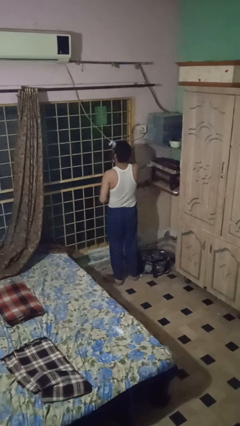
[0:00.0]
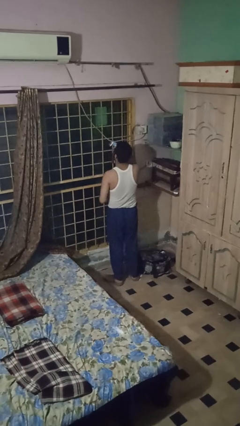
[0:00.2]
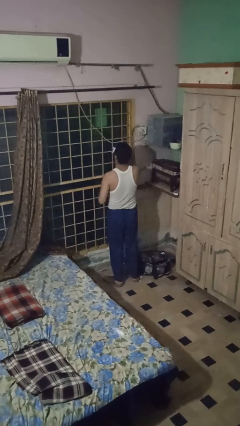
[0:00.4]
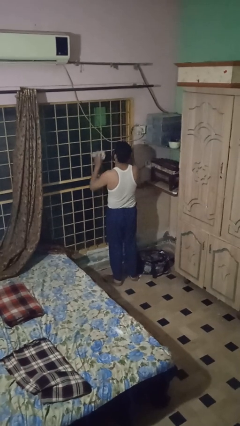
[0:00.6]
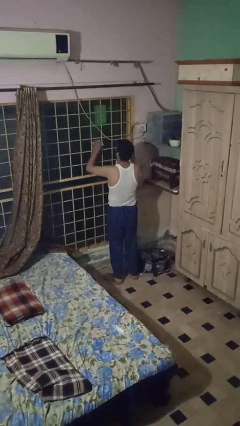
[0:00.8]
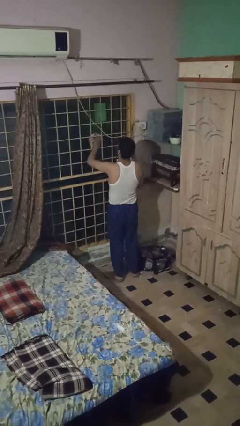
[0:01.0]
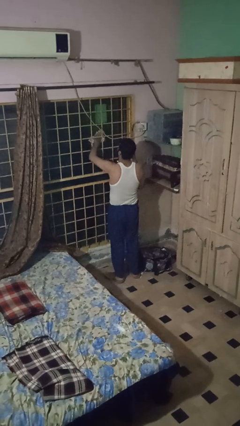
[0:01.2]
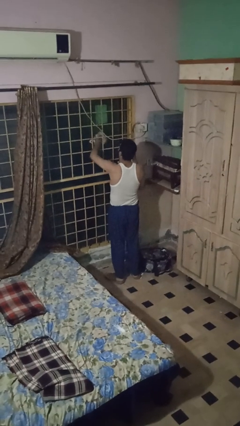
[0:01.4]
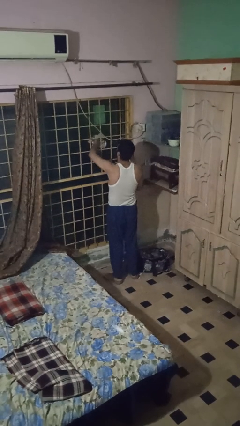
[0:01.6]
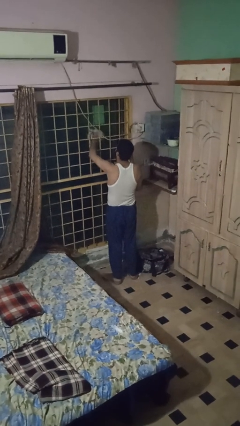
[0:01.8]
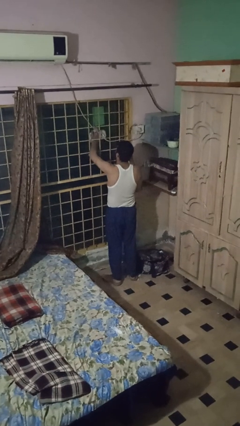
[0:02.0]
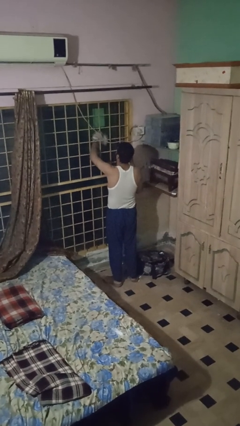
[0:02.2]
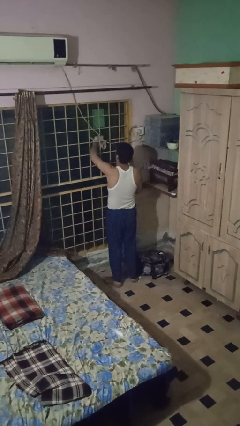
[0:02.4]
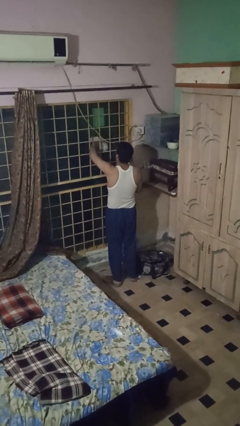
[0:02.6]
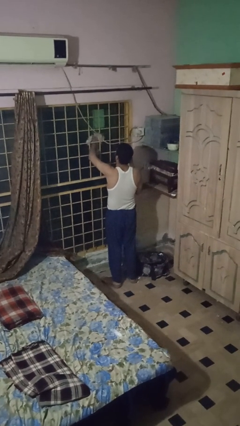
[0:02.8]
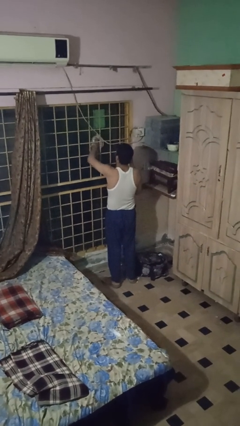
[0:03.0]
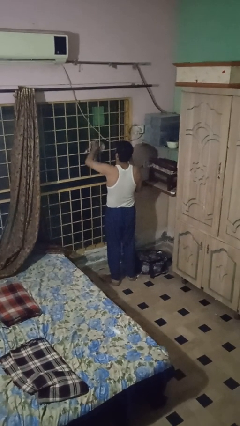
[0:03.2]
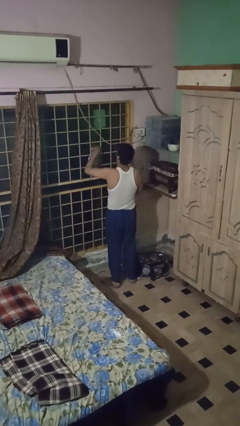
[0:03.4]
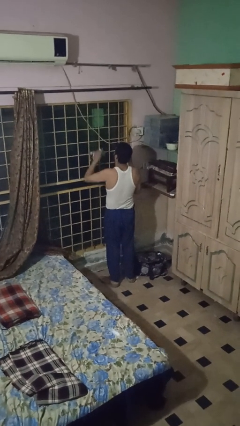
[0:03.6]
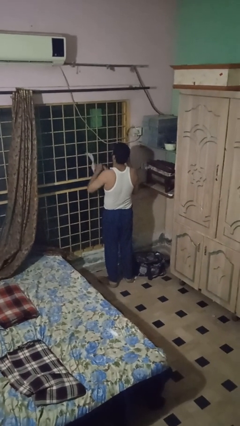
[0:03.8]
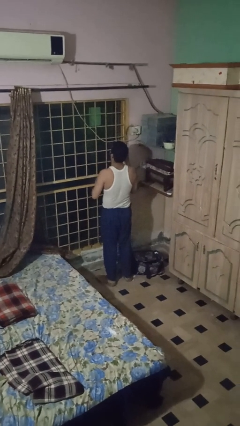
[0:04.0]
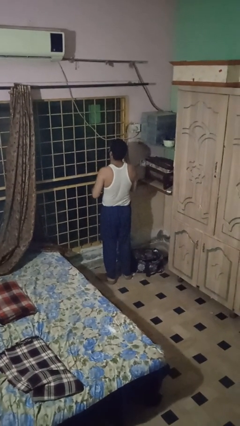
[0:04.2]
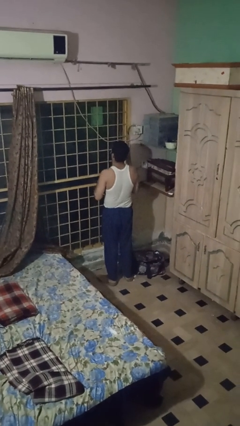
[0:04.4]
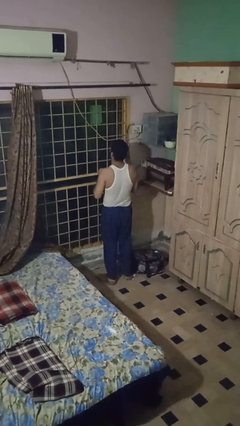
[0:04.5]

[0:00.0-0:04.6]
person washes window

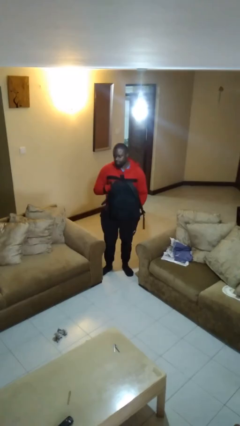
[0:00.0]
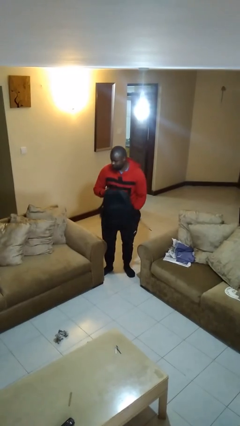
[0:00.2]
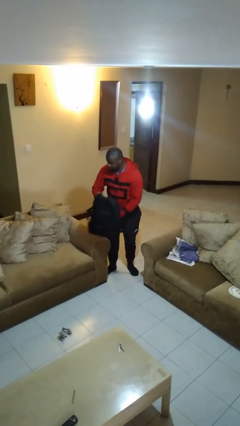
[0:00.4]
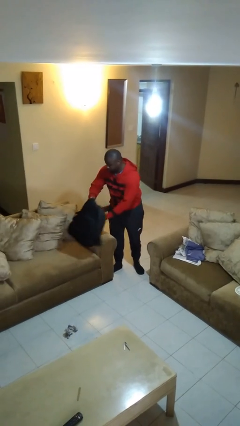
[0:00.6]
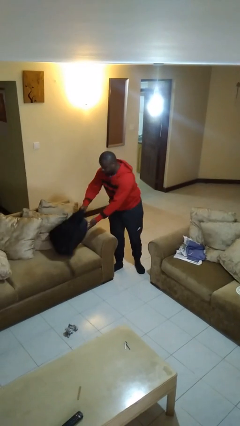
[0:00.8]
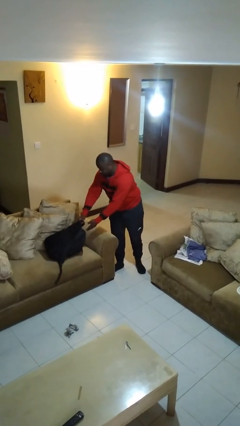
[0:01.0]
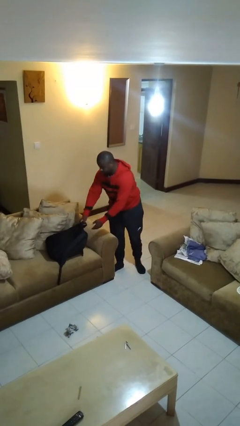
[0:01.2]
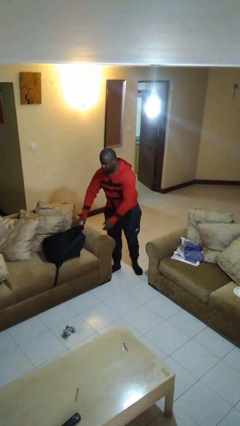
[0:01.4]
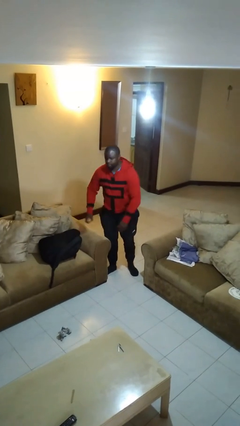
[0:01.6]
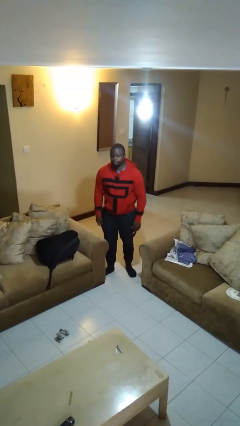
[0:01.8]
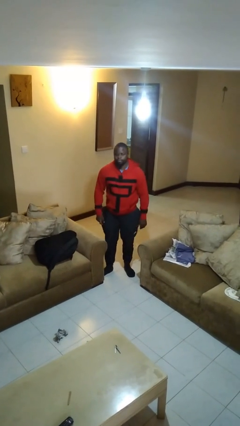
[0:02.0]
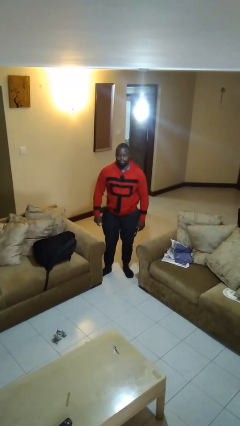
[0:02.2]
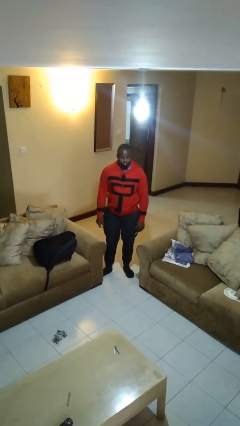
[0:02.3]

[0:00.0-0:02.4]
person puts down object on couch

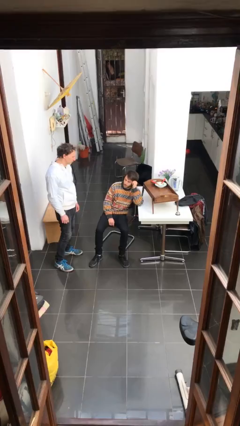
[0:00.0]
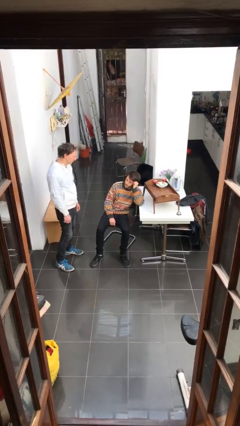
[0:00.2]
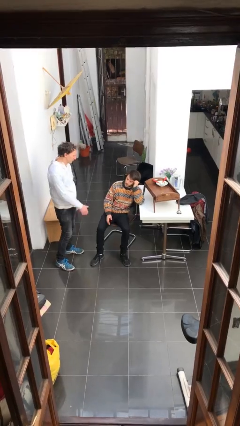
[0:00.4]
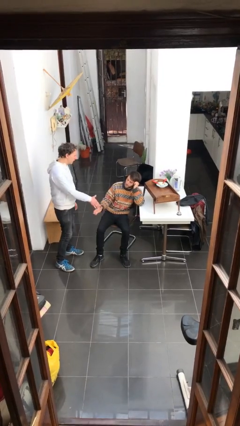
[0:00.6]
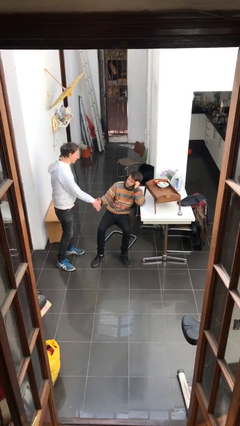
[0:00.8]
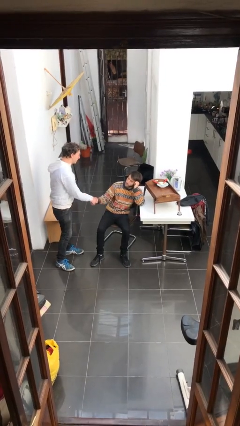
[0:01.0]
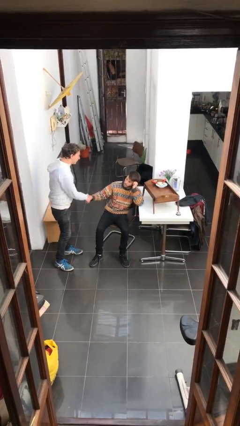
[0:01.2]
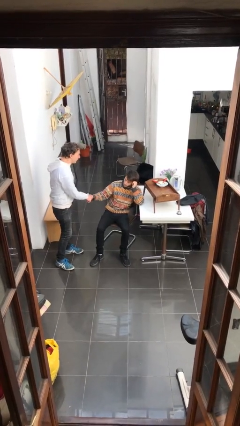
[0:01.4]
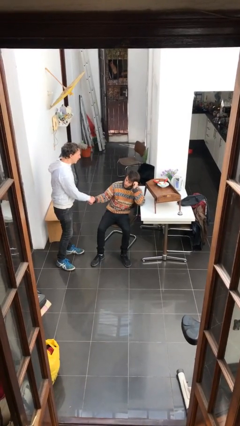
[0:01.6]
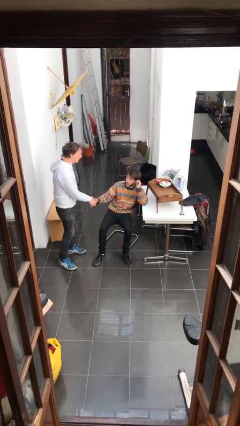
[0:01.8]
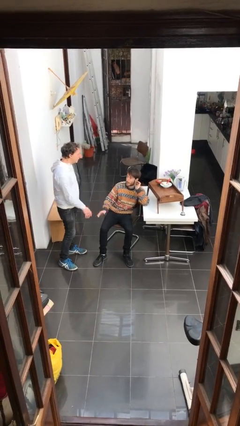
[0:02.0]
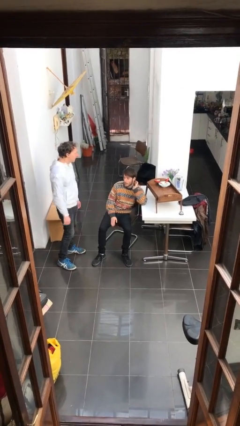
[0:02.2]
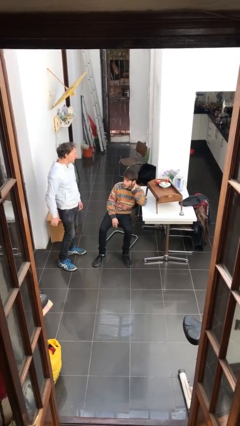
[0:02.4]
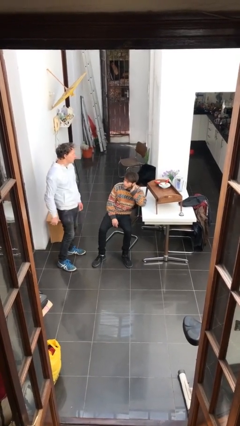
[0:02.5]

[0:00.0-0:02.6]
person shakes hand

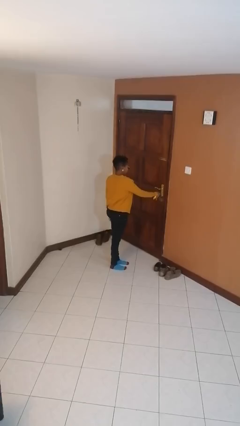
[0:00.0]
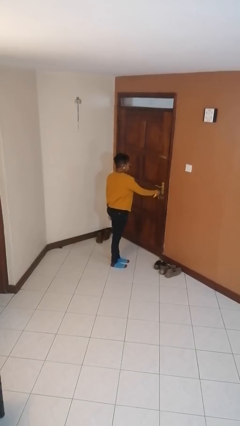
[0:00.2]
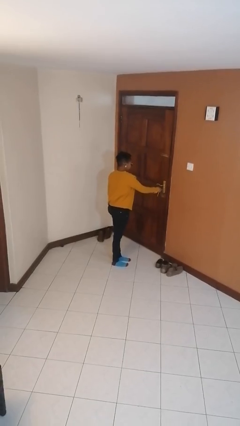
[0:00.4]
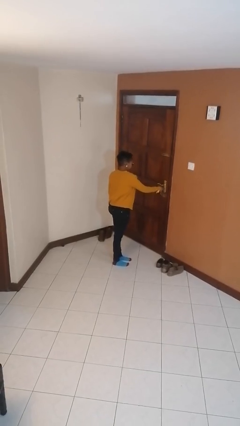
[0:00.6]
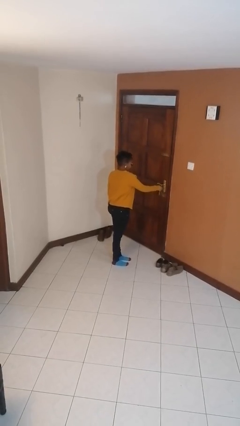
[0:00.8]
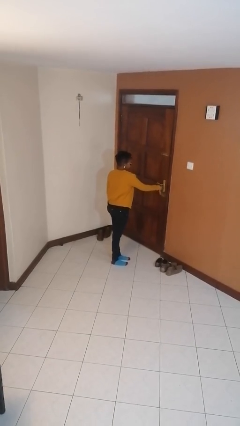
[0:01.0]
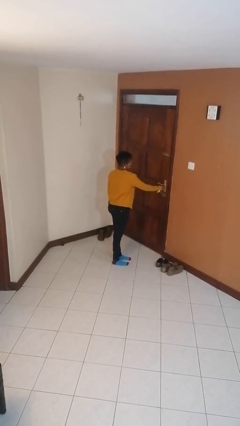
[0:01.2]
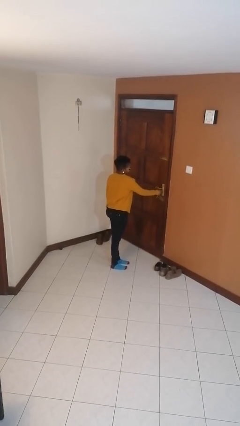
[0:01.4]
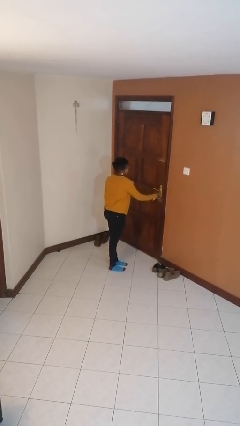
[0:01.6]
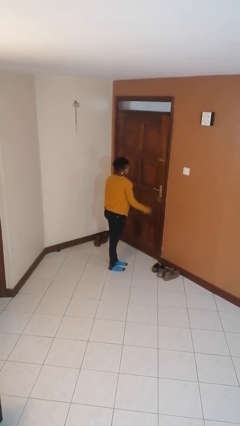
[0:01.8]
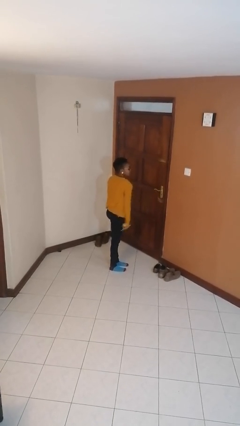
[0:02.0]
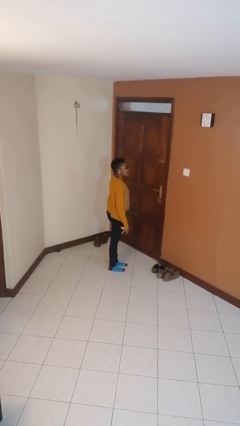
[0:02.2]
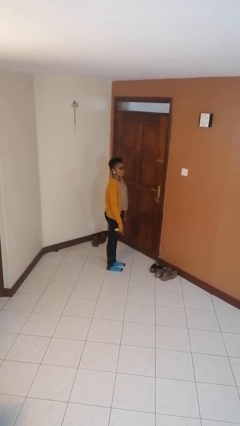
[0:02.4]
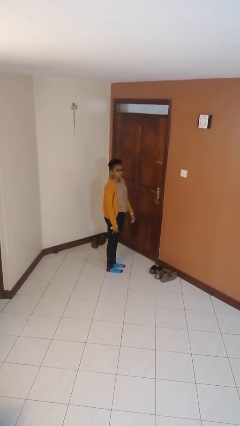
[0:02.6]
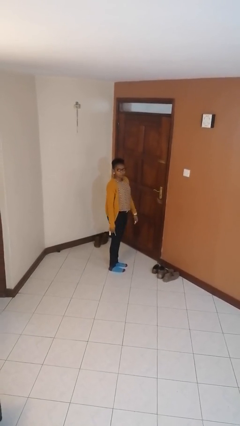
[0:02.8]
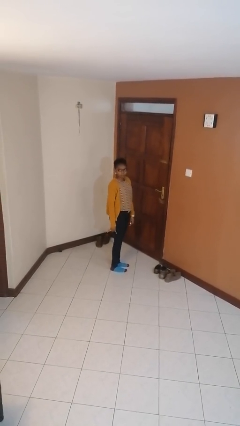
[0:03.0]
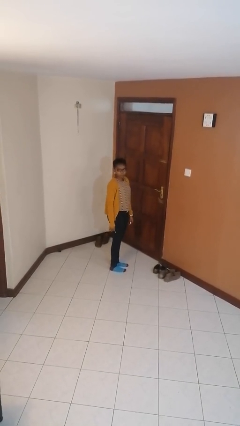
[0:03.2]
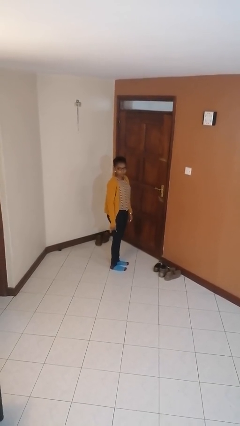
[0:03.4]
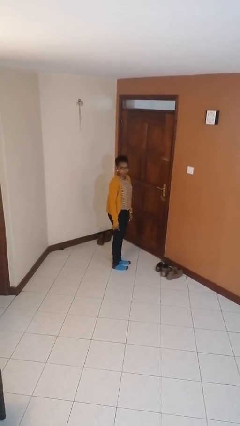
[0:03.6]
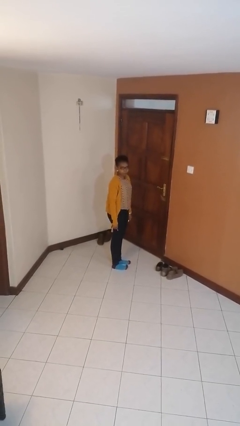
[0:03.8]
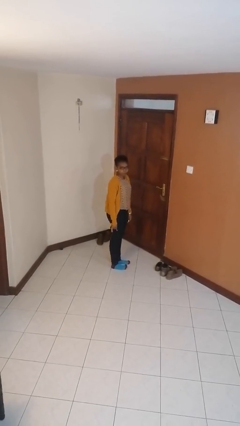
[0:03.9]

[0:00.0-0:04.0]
person locks door with keys

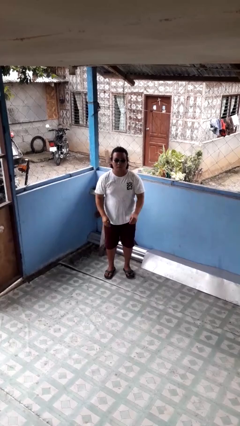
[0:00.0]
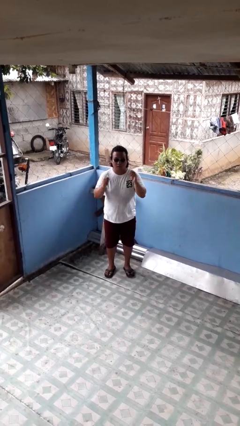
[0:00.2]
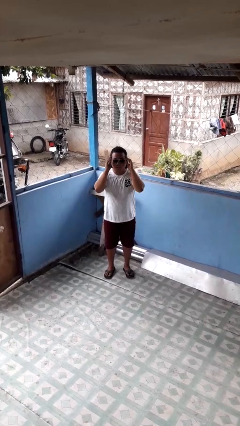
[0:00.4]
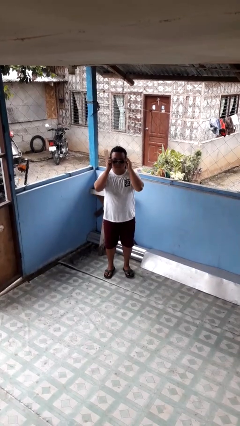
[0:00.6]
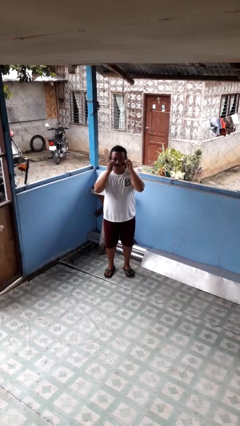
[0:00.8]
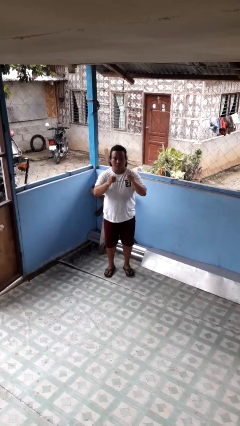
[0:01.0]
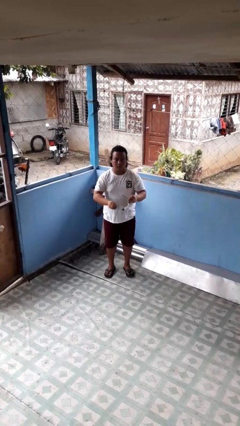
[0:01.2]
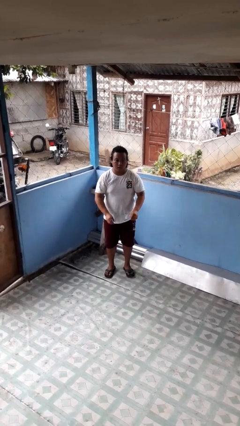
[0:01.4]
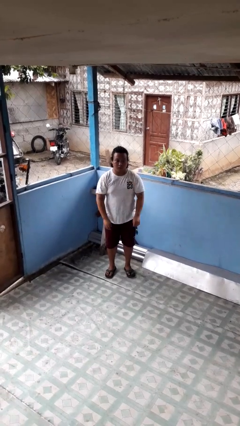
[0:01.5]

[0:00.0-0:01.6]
person takes off sunglasses

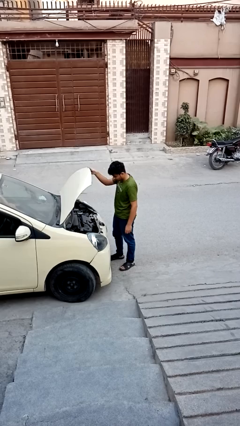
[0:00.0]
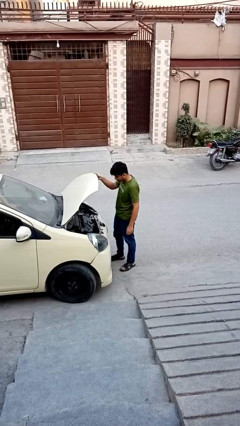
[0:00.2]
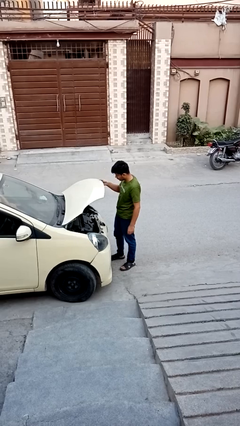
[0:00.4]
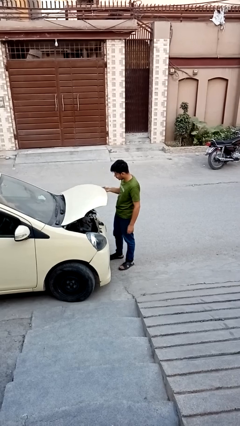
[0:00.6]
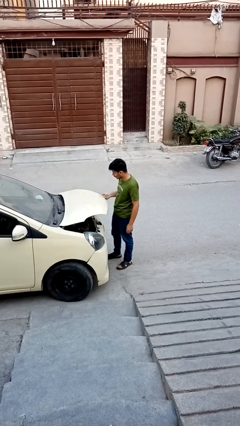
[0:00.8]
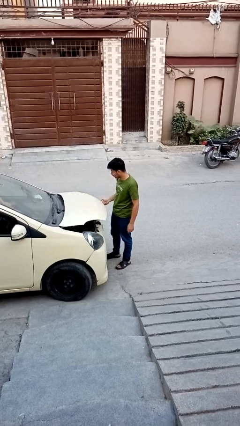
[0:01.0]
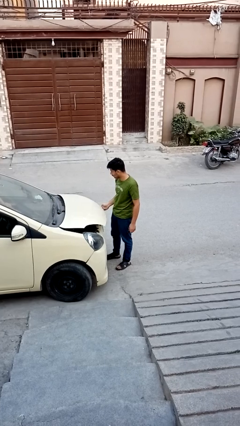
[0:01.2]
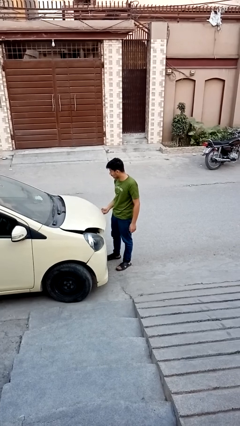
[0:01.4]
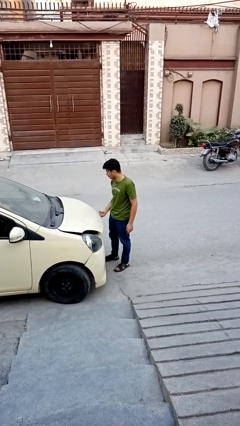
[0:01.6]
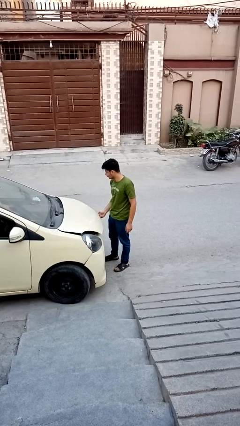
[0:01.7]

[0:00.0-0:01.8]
person closes car hood

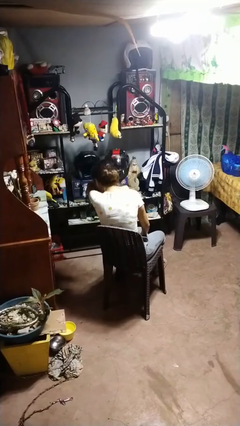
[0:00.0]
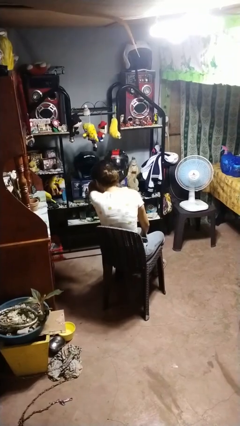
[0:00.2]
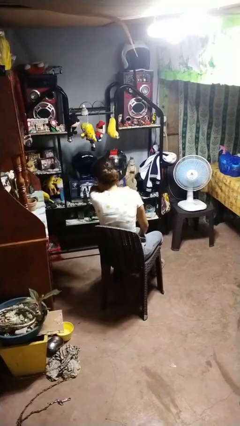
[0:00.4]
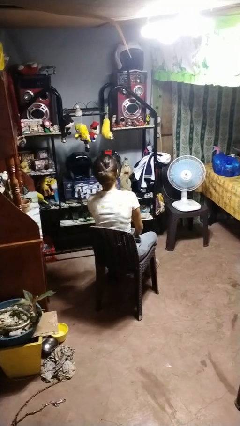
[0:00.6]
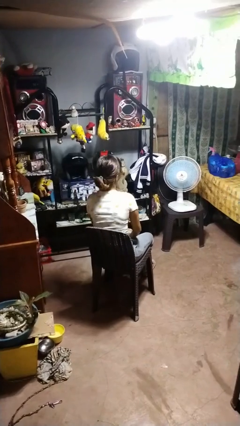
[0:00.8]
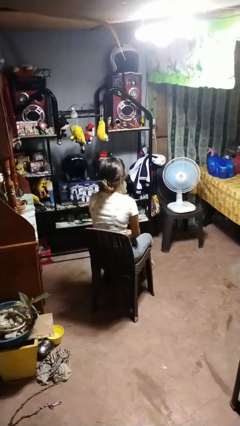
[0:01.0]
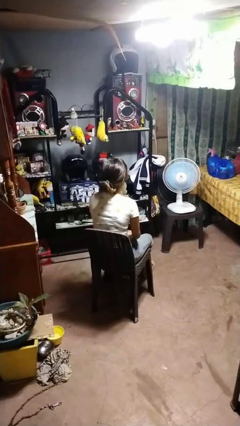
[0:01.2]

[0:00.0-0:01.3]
person sneezes into arm
